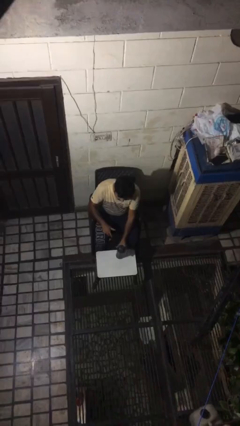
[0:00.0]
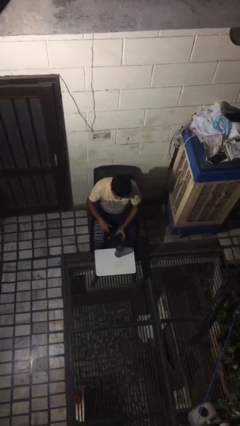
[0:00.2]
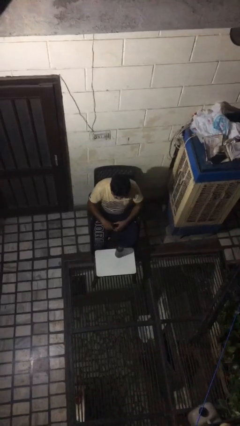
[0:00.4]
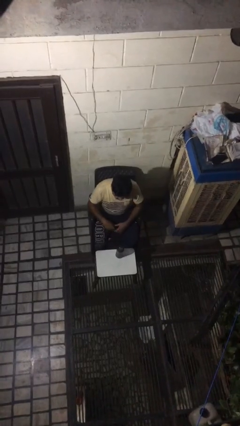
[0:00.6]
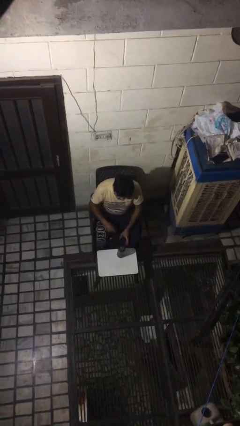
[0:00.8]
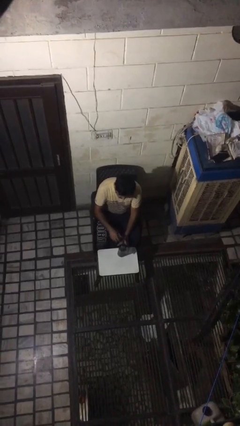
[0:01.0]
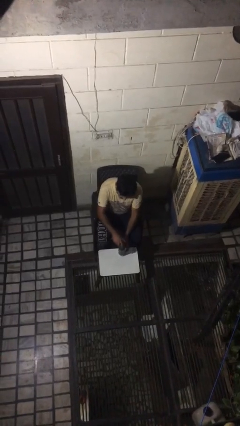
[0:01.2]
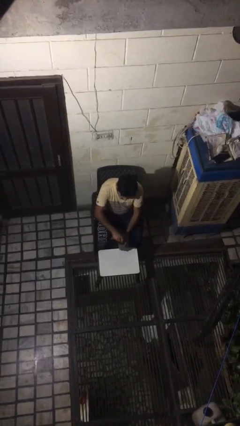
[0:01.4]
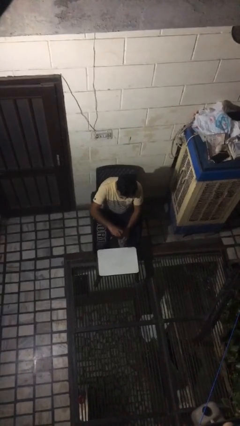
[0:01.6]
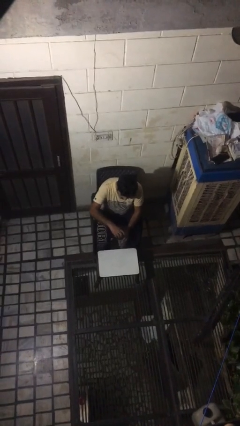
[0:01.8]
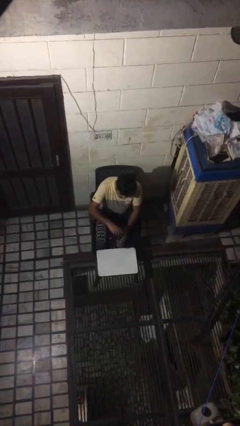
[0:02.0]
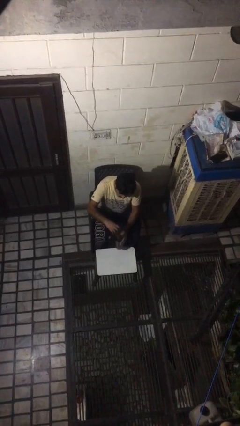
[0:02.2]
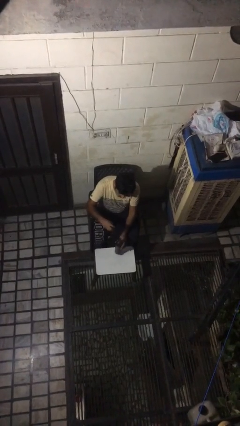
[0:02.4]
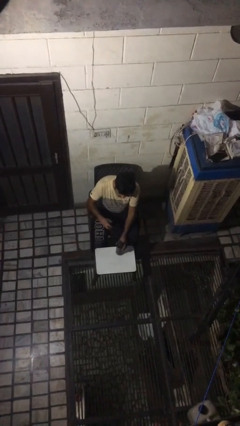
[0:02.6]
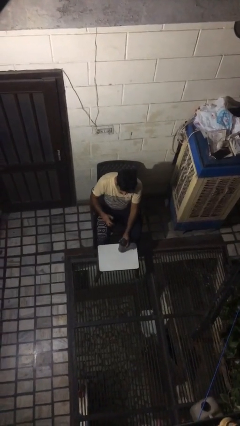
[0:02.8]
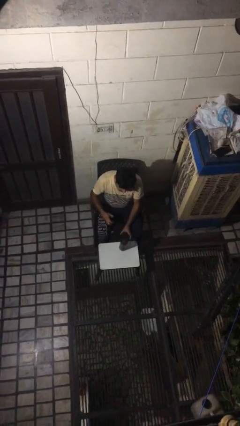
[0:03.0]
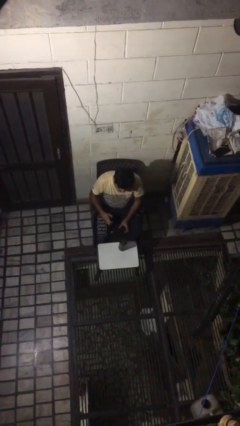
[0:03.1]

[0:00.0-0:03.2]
person unscrews lid from bottle

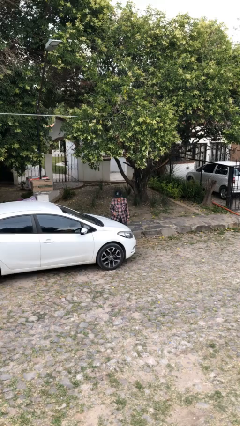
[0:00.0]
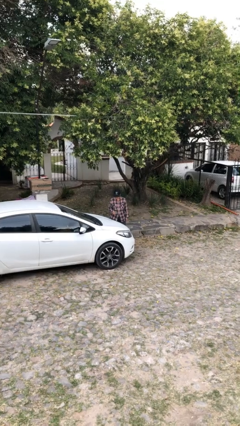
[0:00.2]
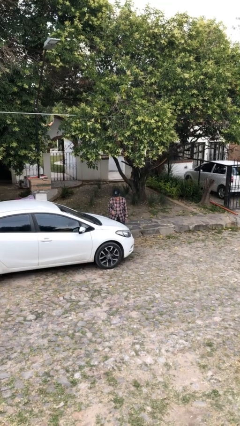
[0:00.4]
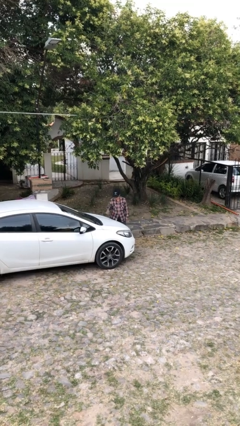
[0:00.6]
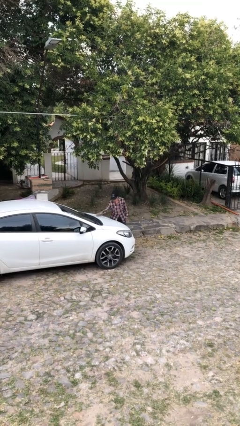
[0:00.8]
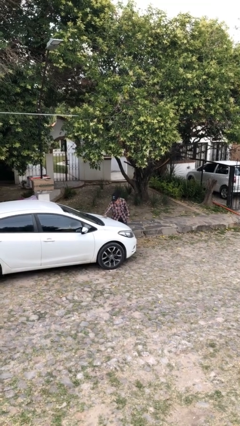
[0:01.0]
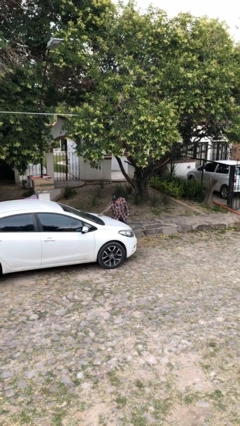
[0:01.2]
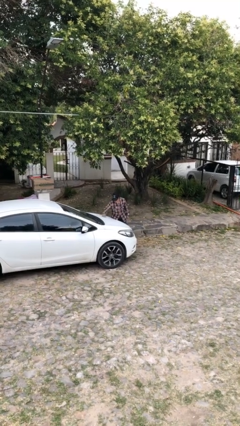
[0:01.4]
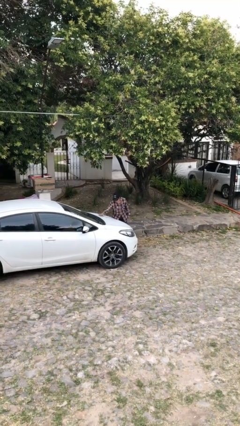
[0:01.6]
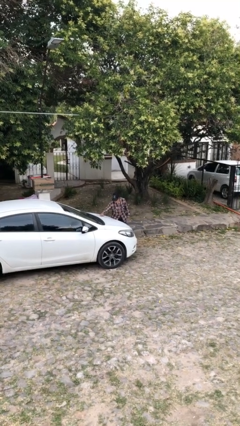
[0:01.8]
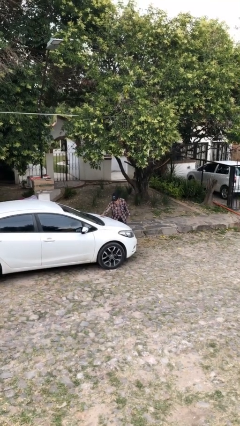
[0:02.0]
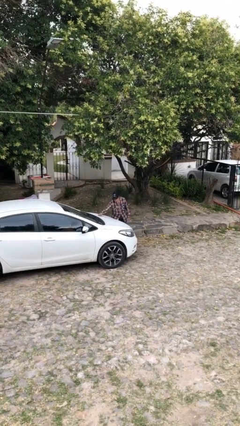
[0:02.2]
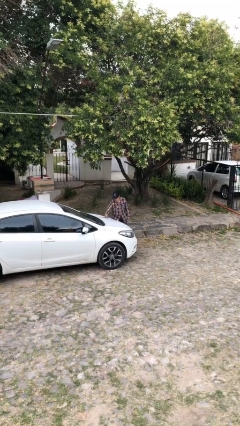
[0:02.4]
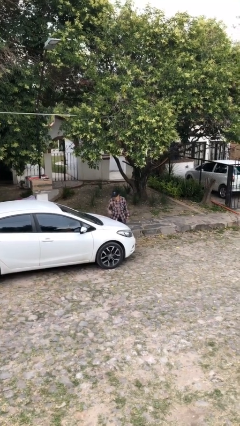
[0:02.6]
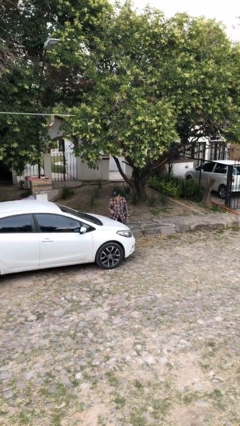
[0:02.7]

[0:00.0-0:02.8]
person polishes car with rag

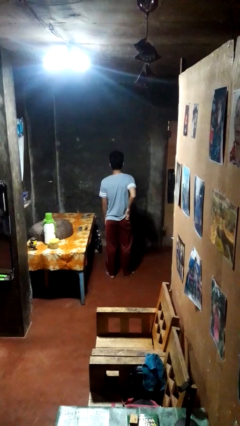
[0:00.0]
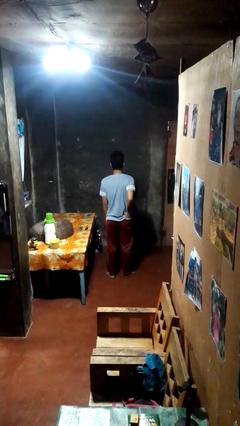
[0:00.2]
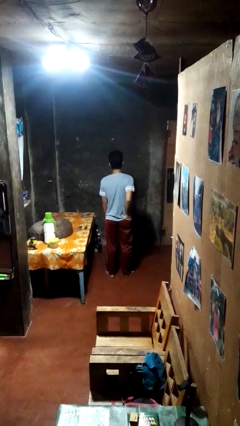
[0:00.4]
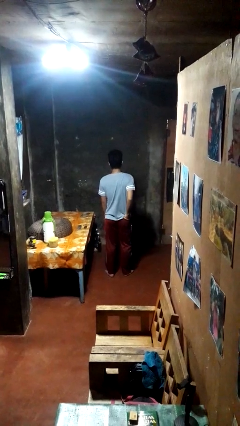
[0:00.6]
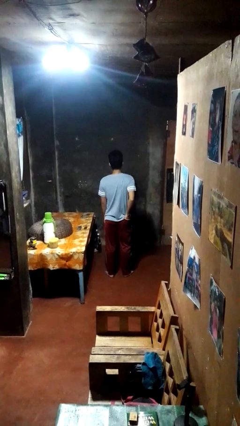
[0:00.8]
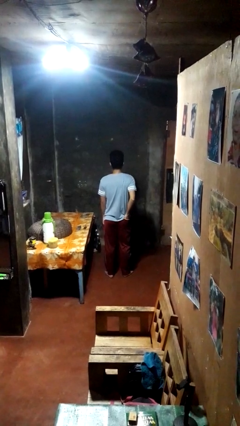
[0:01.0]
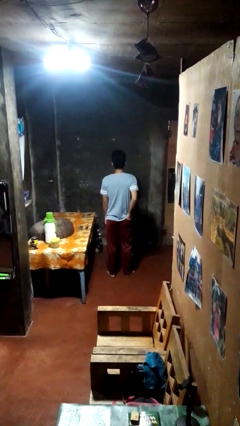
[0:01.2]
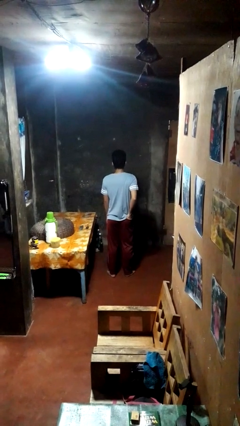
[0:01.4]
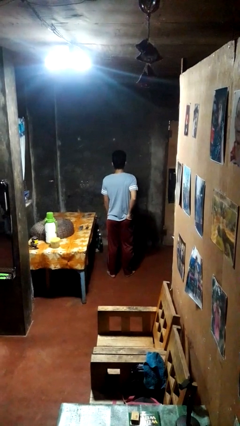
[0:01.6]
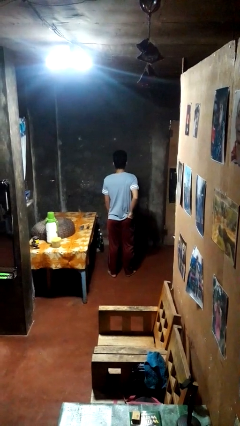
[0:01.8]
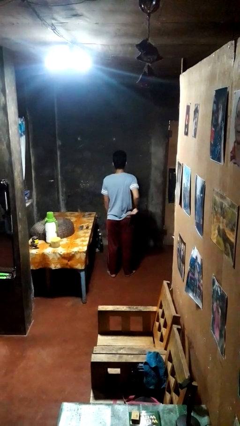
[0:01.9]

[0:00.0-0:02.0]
person puts hands in back pockets

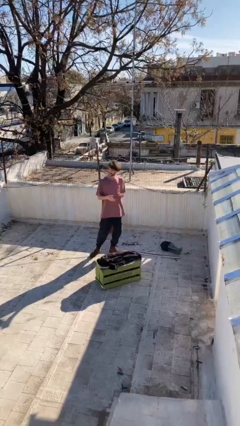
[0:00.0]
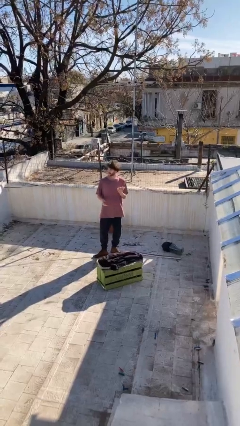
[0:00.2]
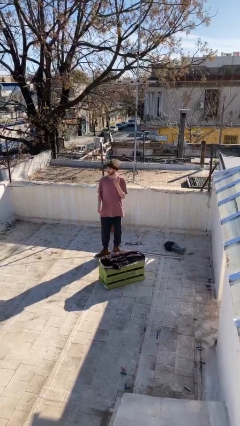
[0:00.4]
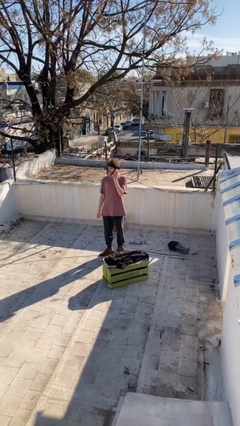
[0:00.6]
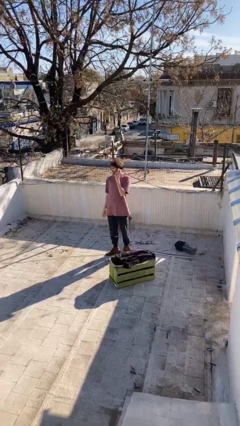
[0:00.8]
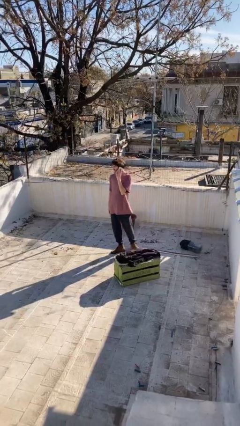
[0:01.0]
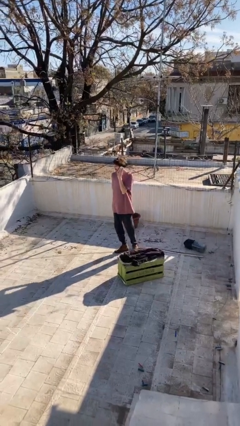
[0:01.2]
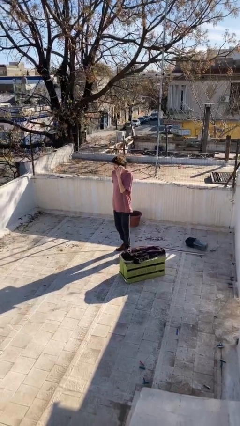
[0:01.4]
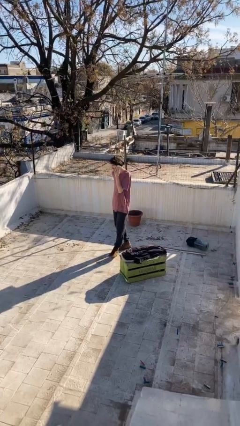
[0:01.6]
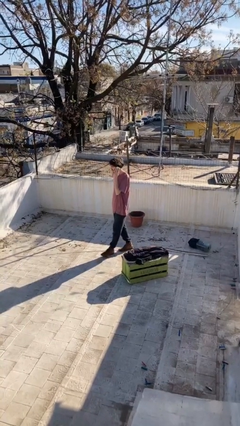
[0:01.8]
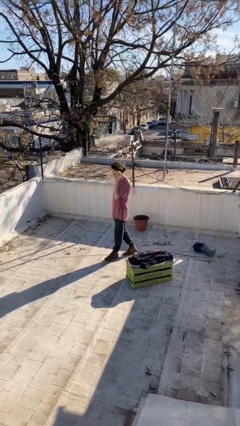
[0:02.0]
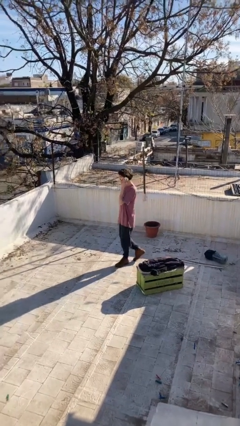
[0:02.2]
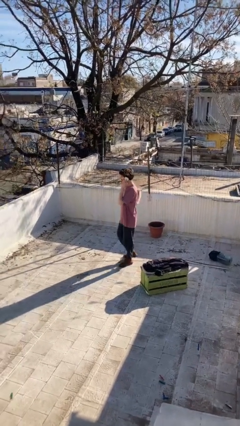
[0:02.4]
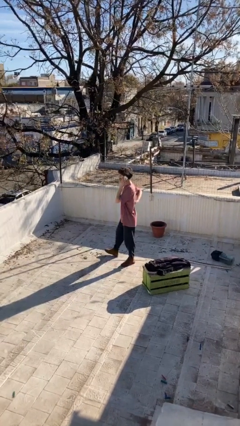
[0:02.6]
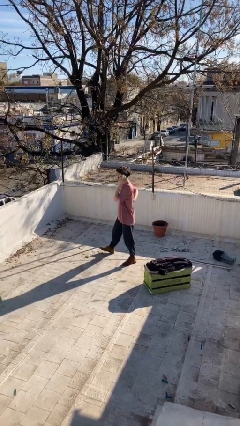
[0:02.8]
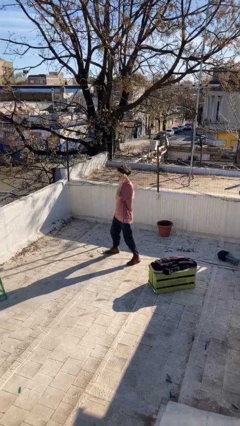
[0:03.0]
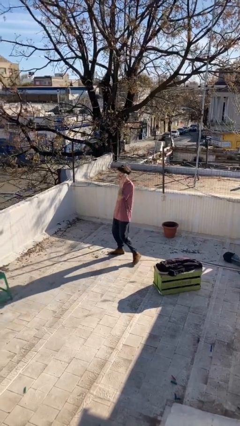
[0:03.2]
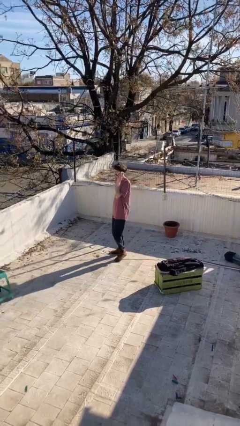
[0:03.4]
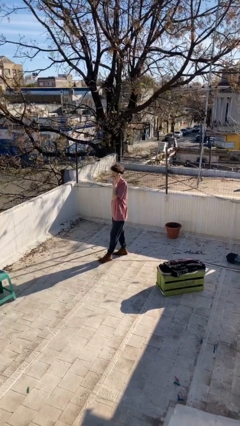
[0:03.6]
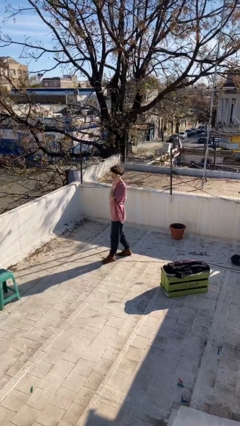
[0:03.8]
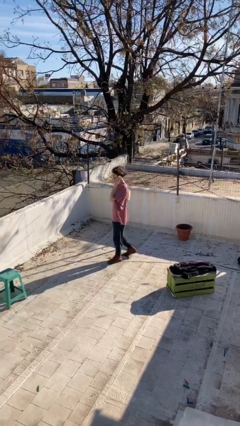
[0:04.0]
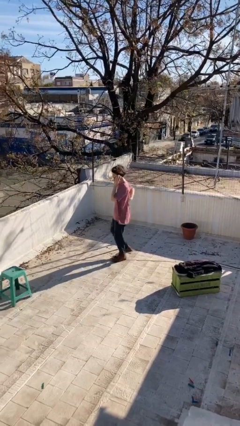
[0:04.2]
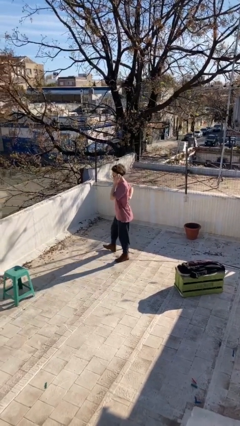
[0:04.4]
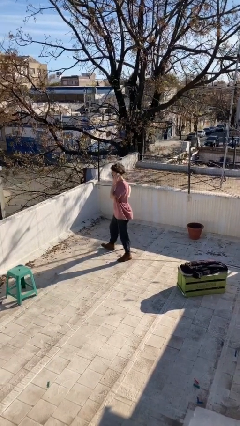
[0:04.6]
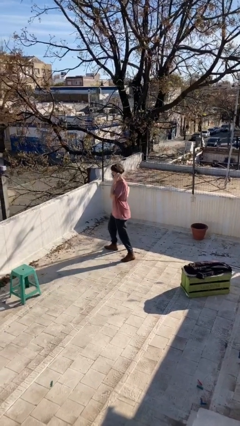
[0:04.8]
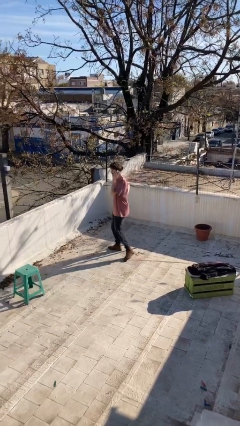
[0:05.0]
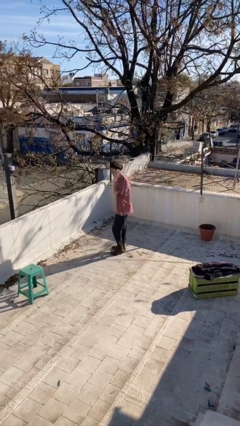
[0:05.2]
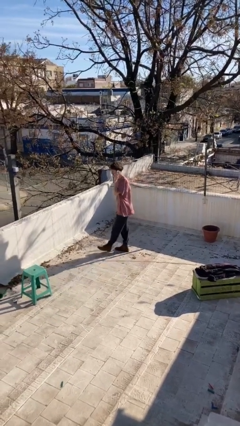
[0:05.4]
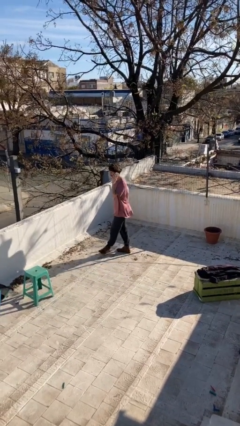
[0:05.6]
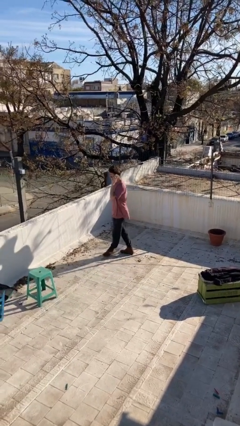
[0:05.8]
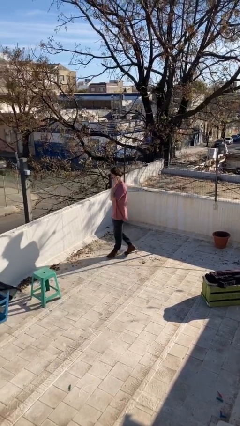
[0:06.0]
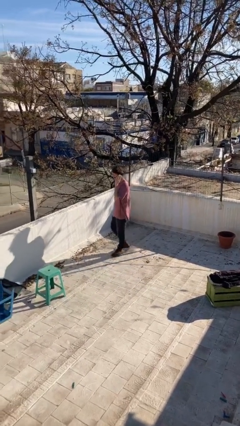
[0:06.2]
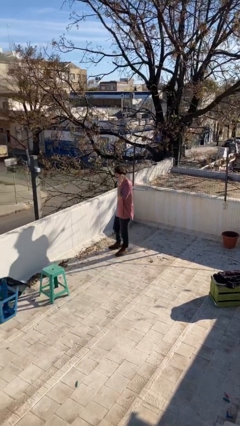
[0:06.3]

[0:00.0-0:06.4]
person talks on phone

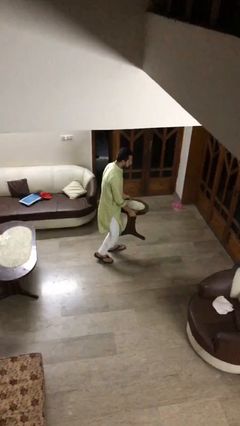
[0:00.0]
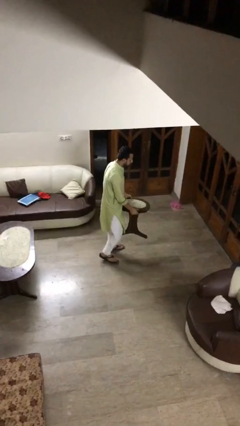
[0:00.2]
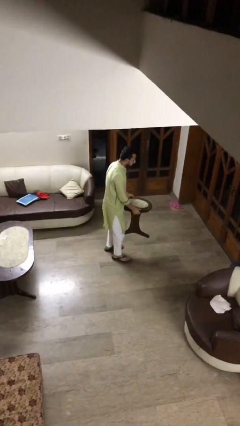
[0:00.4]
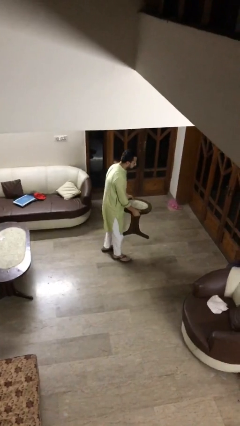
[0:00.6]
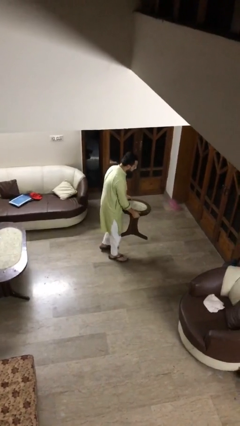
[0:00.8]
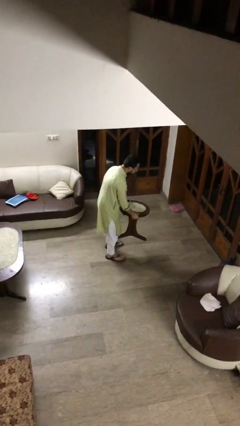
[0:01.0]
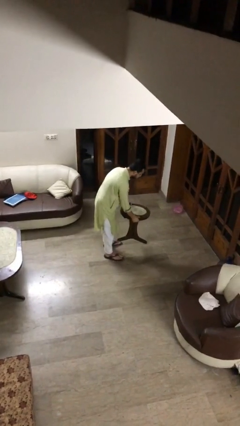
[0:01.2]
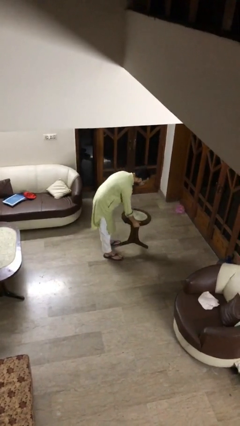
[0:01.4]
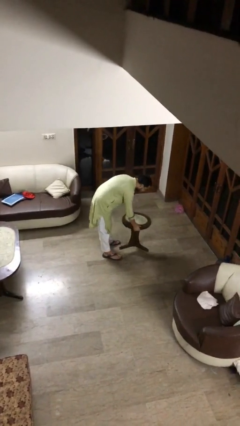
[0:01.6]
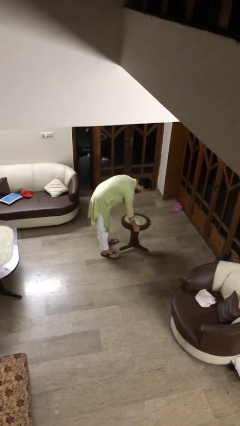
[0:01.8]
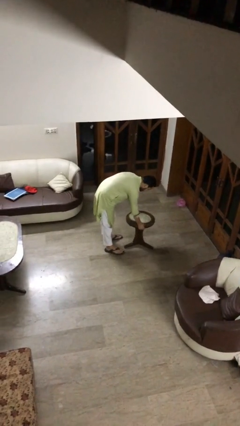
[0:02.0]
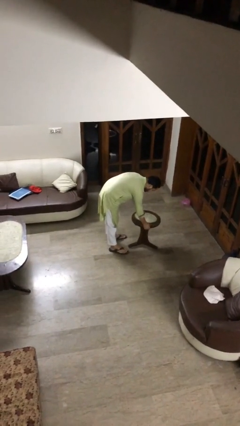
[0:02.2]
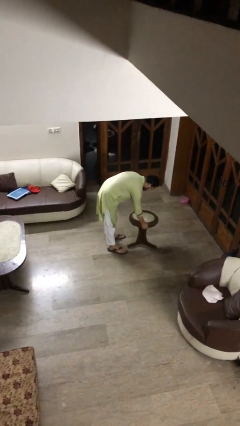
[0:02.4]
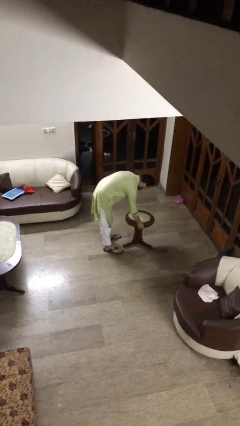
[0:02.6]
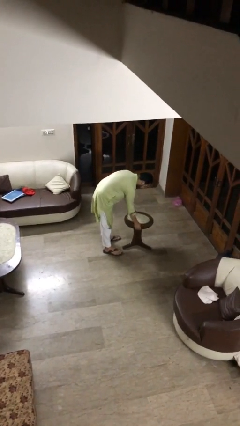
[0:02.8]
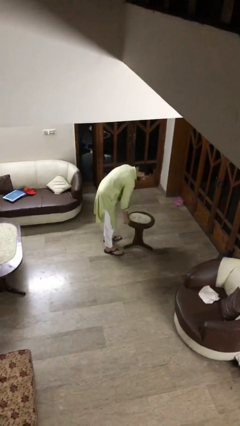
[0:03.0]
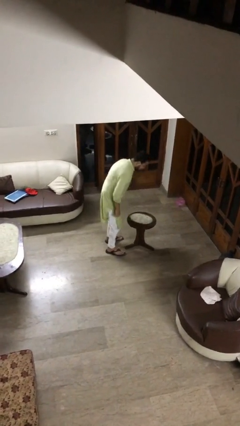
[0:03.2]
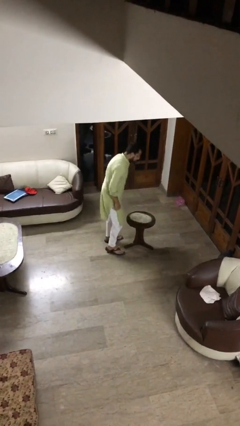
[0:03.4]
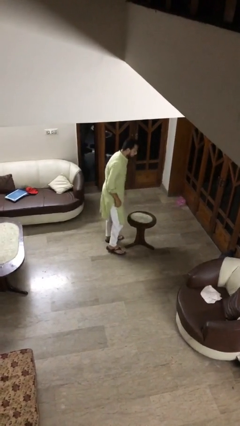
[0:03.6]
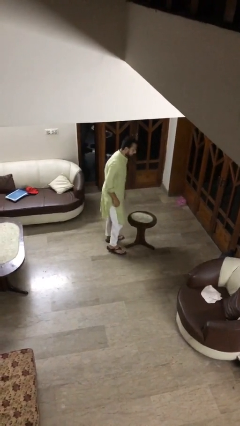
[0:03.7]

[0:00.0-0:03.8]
person puts down object on floor
